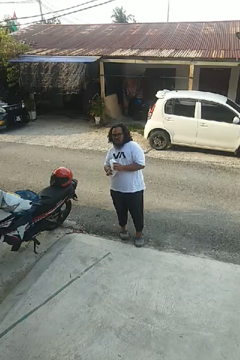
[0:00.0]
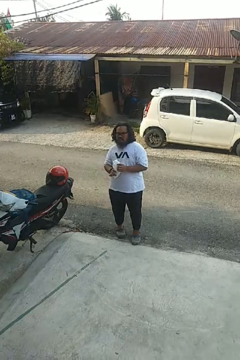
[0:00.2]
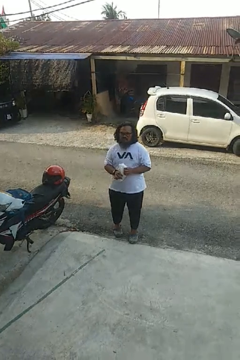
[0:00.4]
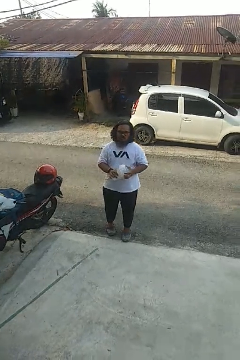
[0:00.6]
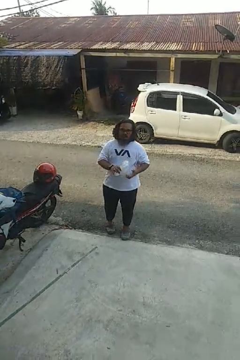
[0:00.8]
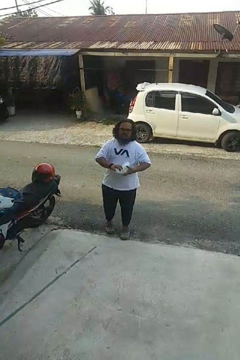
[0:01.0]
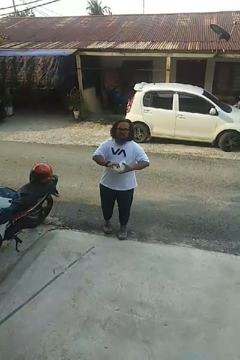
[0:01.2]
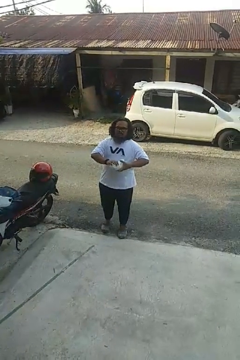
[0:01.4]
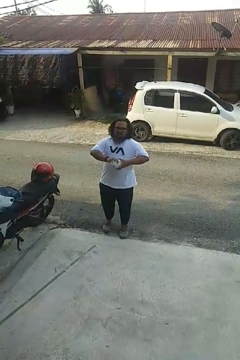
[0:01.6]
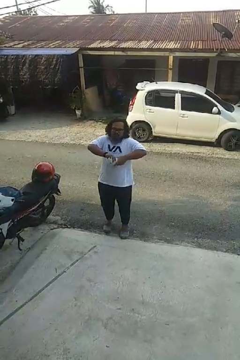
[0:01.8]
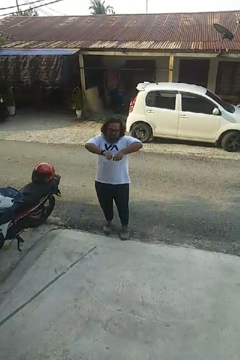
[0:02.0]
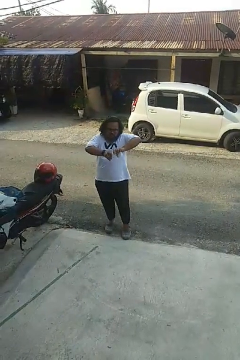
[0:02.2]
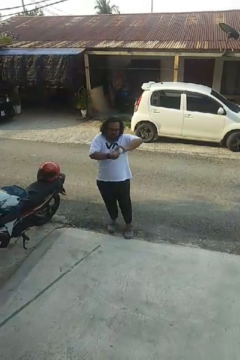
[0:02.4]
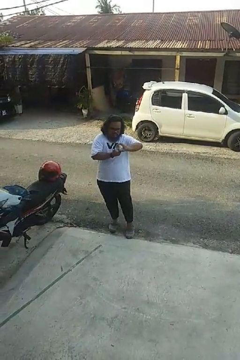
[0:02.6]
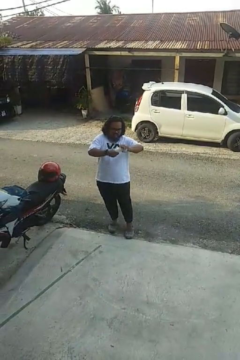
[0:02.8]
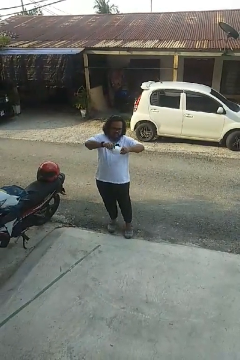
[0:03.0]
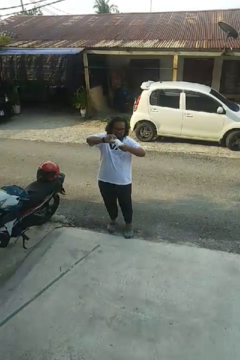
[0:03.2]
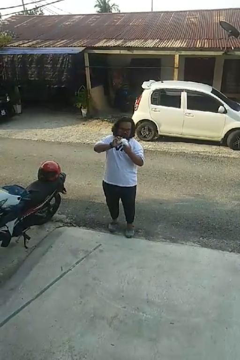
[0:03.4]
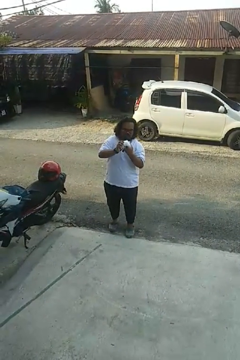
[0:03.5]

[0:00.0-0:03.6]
person squeezes object

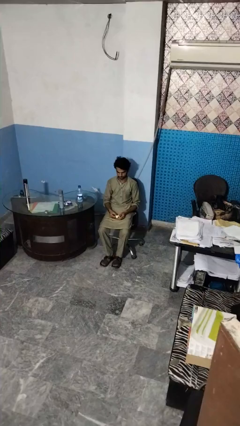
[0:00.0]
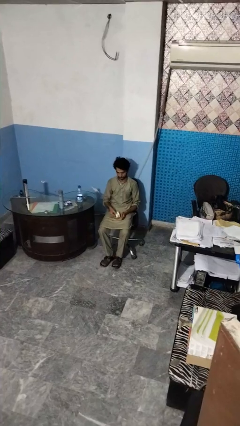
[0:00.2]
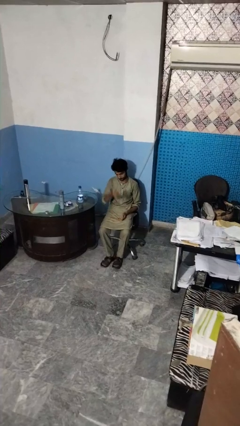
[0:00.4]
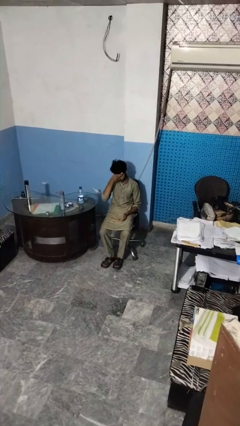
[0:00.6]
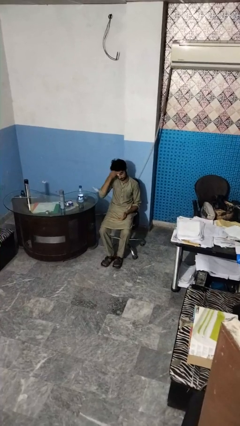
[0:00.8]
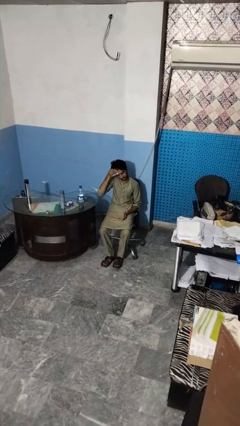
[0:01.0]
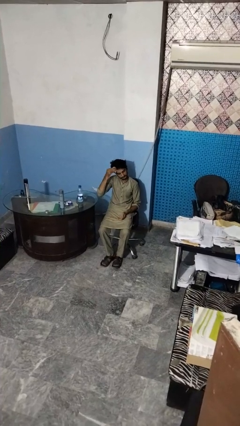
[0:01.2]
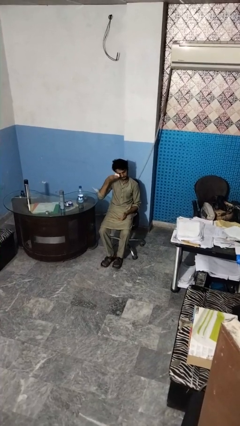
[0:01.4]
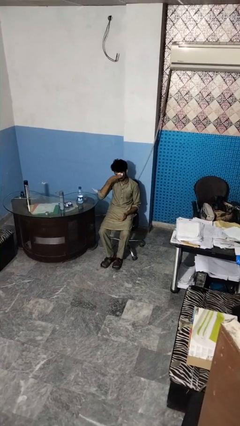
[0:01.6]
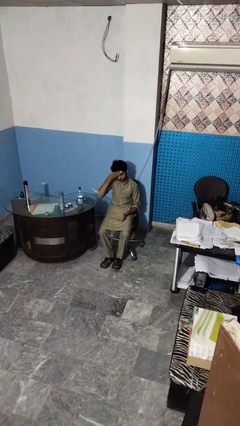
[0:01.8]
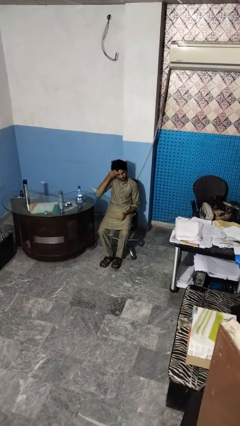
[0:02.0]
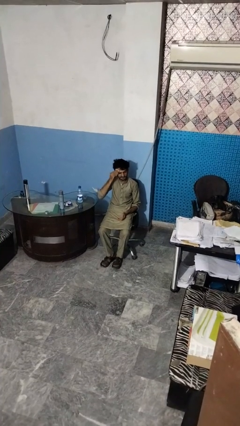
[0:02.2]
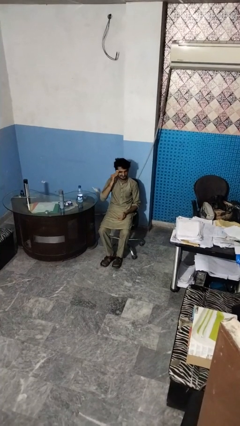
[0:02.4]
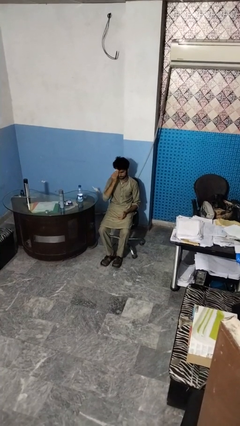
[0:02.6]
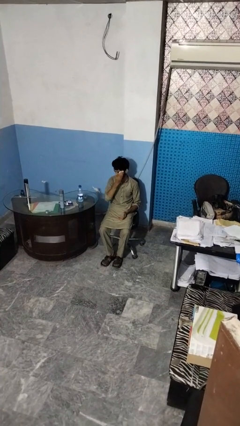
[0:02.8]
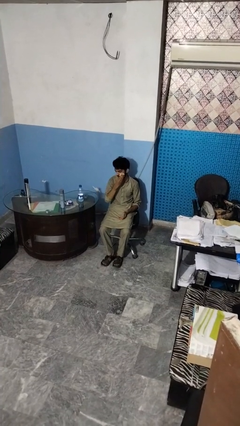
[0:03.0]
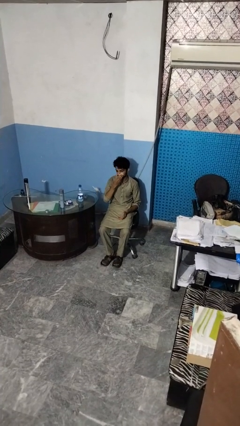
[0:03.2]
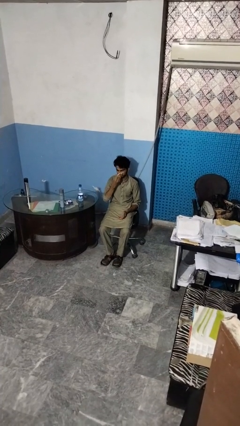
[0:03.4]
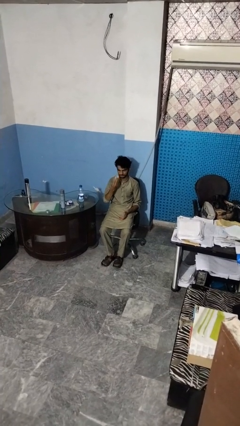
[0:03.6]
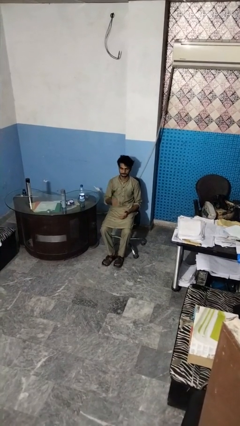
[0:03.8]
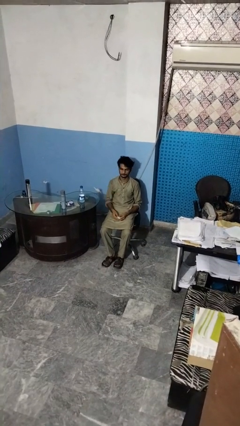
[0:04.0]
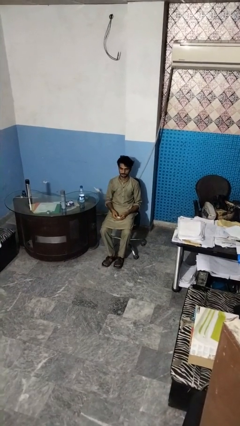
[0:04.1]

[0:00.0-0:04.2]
person wipes mouth with napkin

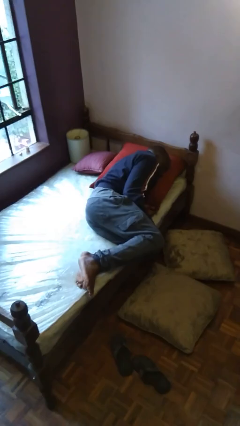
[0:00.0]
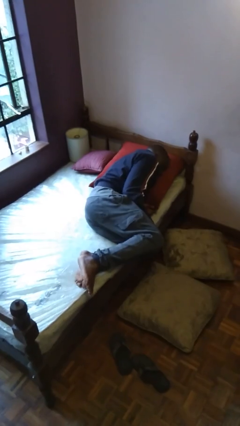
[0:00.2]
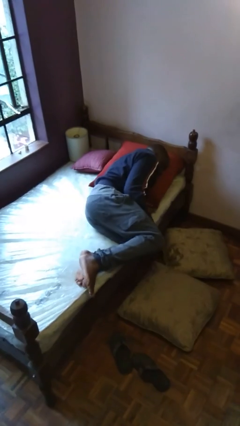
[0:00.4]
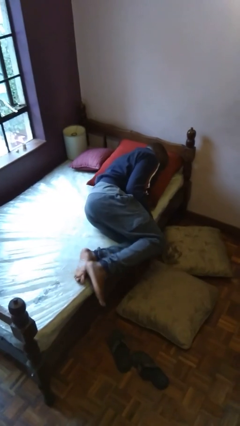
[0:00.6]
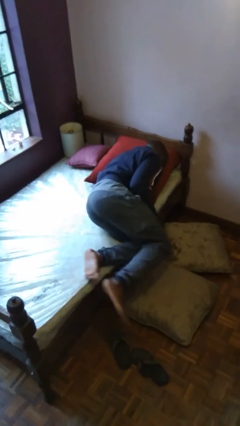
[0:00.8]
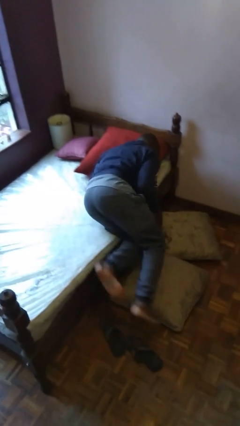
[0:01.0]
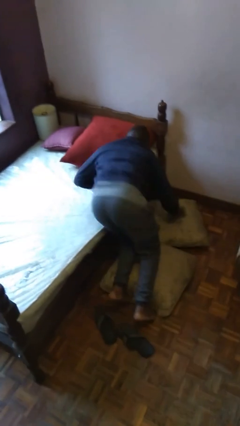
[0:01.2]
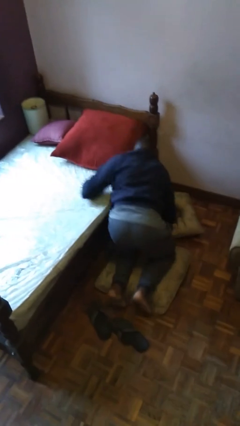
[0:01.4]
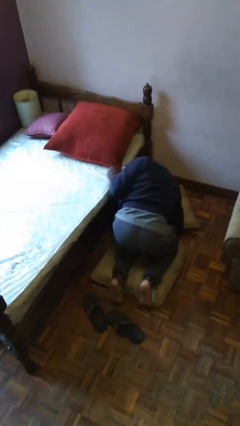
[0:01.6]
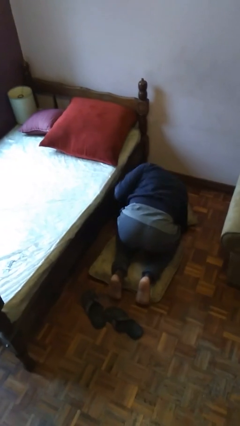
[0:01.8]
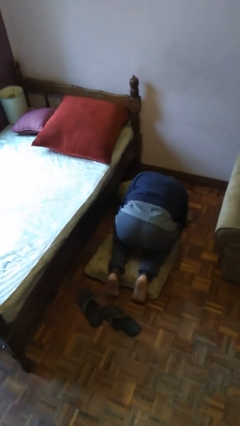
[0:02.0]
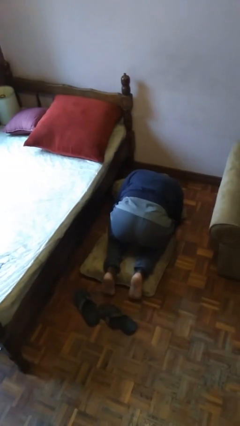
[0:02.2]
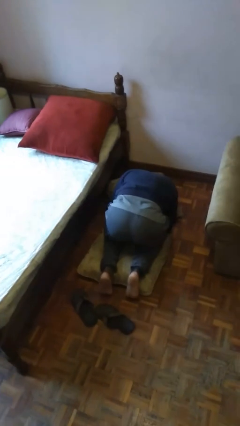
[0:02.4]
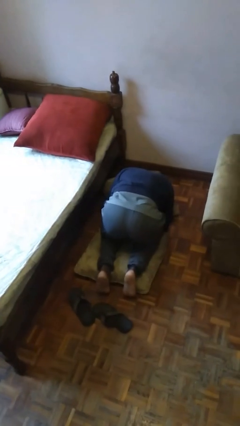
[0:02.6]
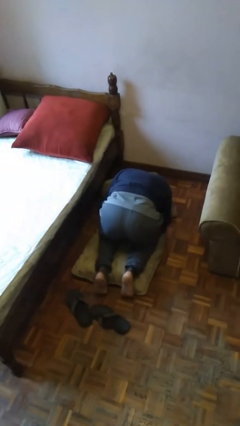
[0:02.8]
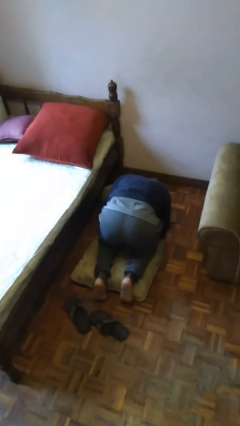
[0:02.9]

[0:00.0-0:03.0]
person falls from bed

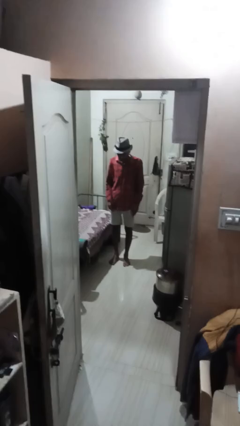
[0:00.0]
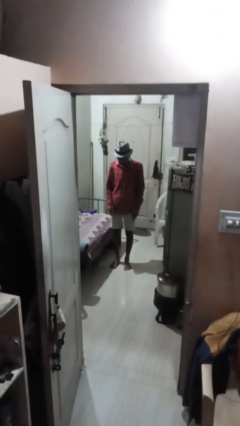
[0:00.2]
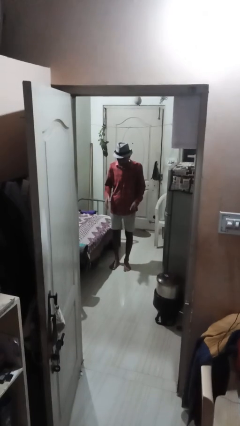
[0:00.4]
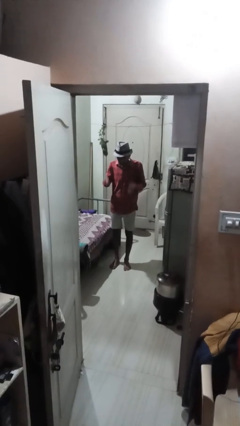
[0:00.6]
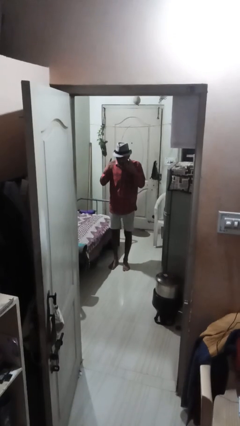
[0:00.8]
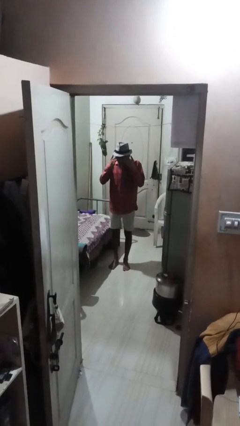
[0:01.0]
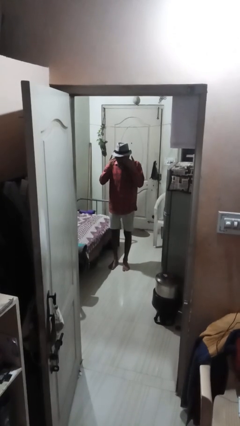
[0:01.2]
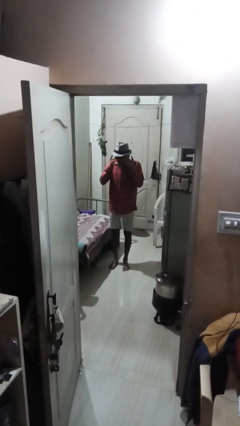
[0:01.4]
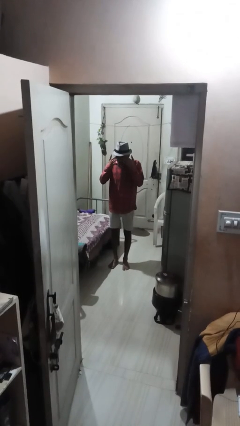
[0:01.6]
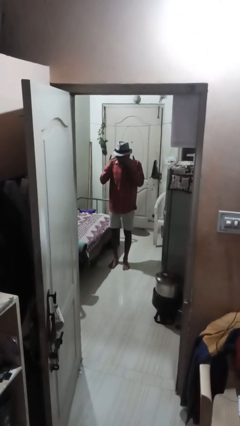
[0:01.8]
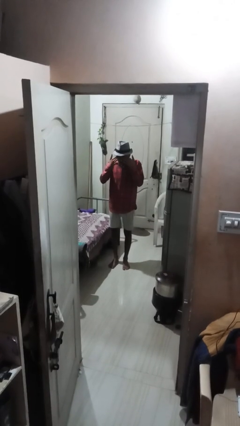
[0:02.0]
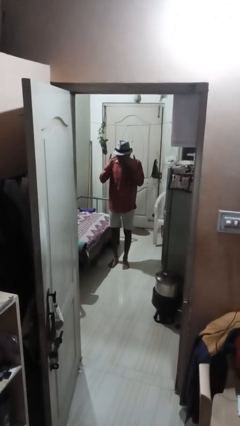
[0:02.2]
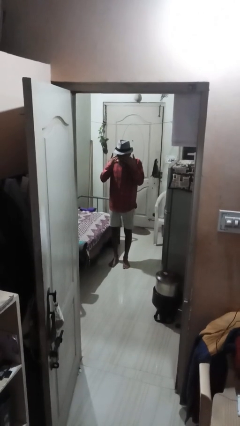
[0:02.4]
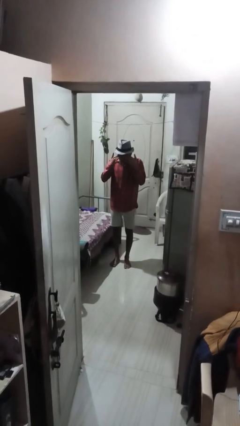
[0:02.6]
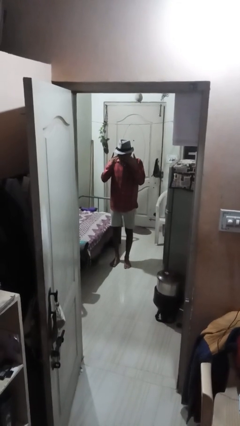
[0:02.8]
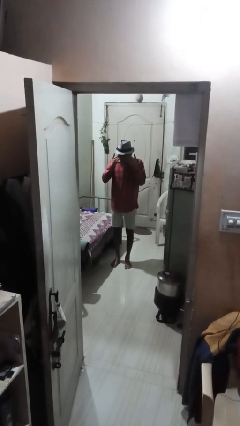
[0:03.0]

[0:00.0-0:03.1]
person rubs eyes

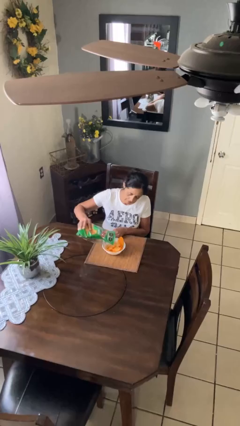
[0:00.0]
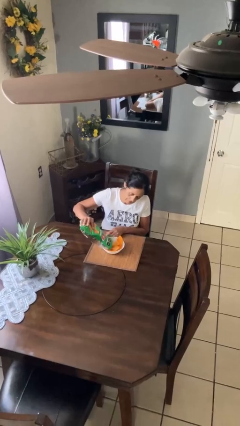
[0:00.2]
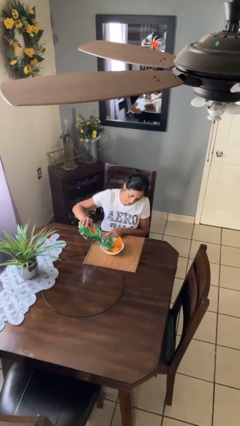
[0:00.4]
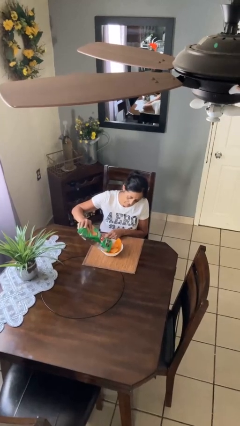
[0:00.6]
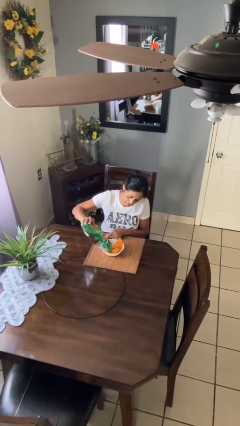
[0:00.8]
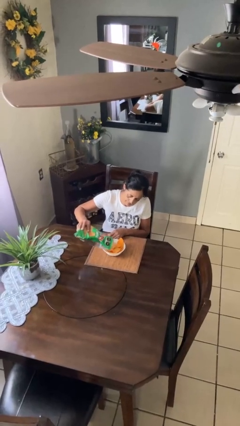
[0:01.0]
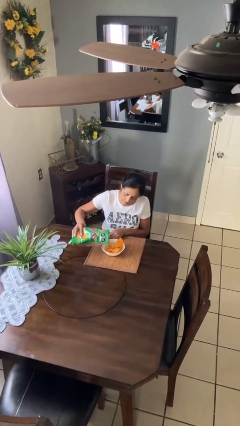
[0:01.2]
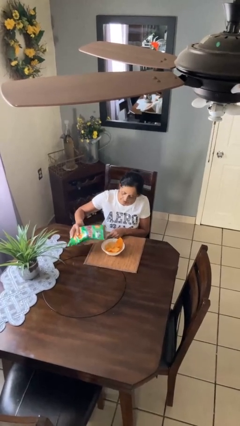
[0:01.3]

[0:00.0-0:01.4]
person pours into bowl

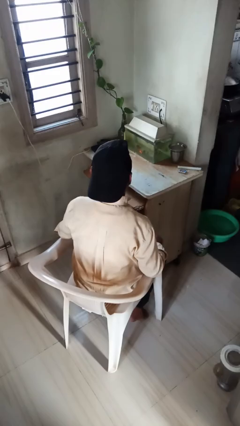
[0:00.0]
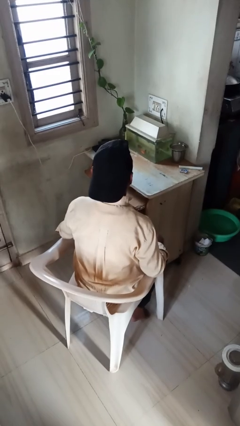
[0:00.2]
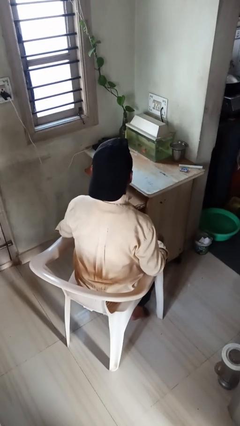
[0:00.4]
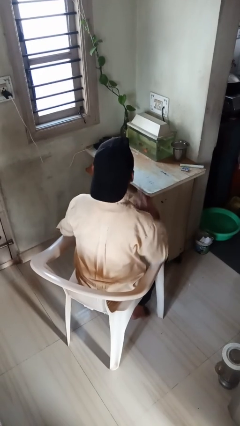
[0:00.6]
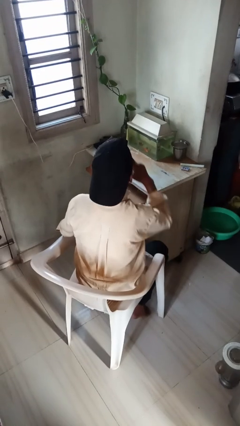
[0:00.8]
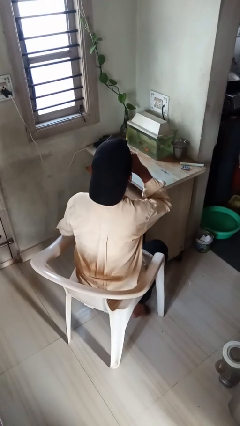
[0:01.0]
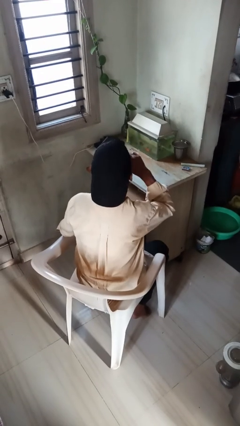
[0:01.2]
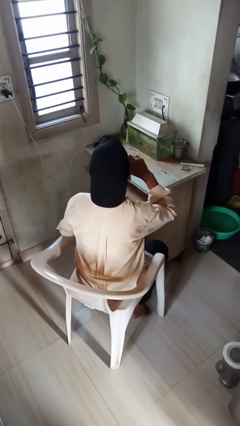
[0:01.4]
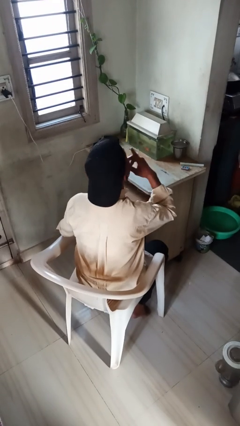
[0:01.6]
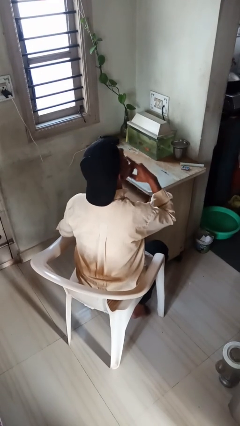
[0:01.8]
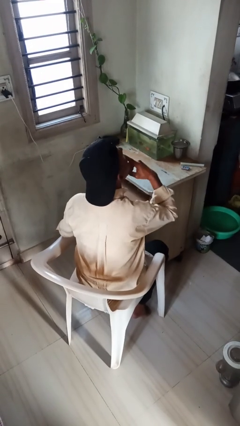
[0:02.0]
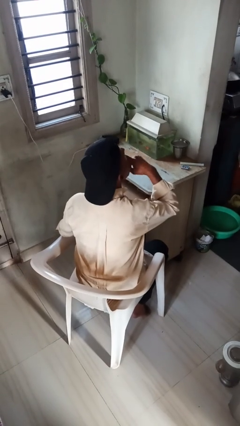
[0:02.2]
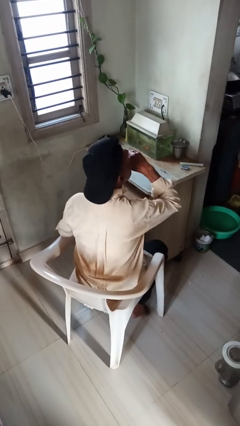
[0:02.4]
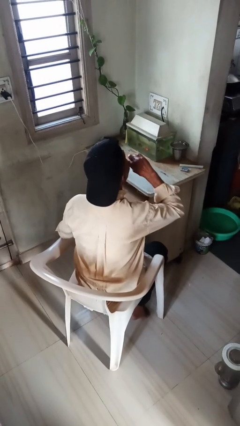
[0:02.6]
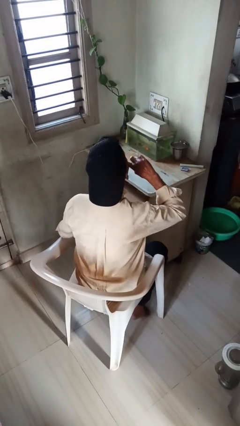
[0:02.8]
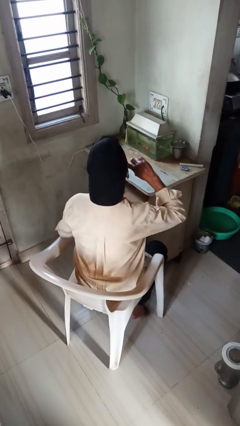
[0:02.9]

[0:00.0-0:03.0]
person licks fingers
